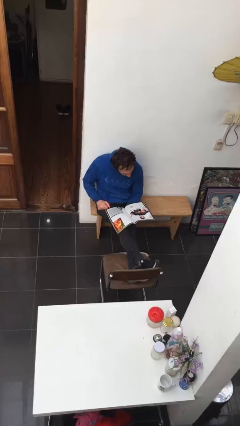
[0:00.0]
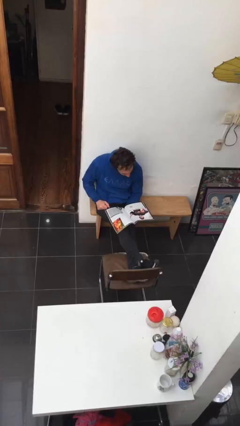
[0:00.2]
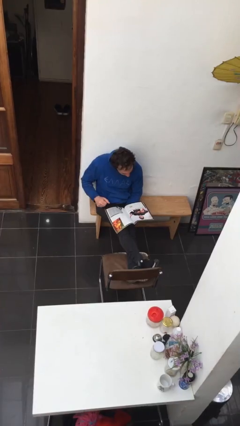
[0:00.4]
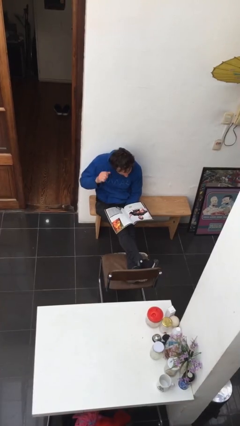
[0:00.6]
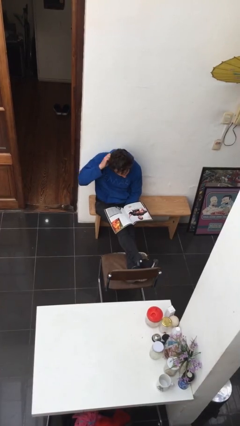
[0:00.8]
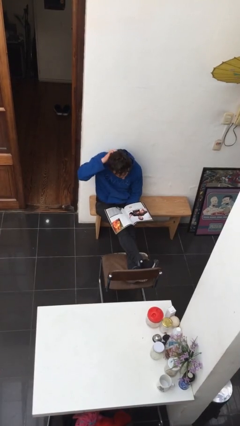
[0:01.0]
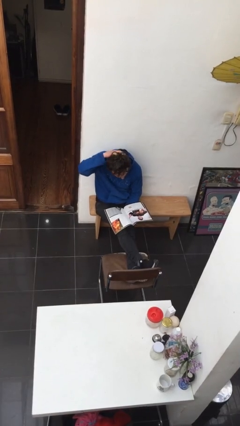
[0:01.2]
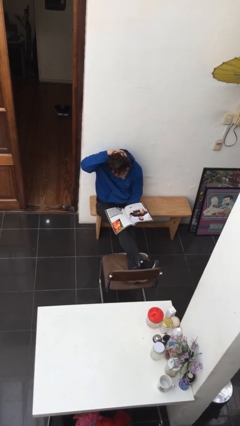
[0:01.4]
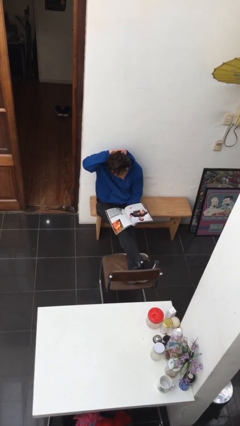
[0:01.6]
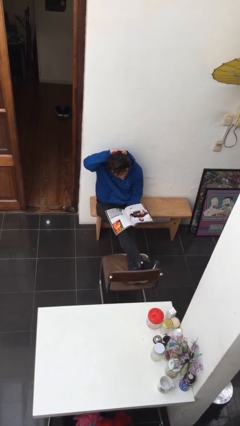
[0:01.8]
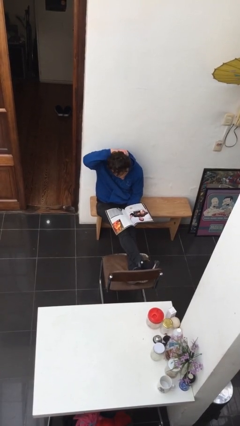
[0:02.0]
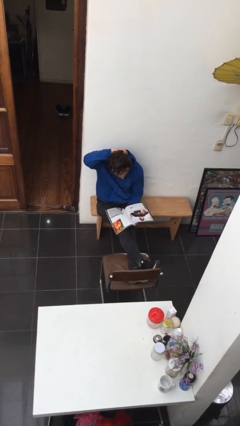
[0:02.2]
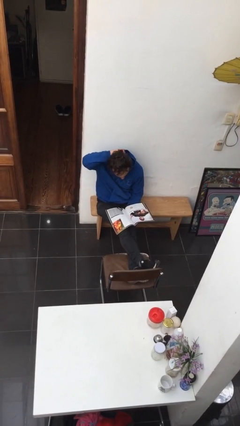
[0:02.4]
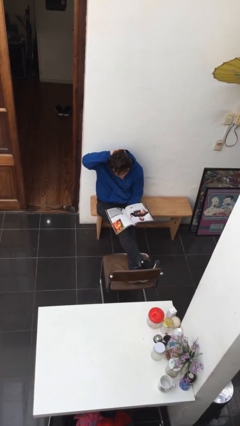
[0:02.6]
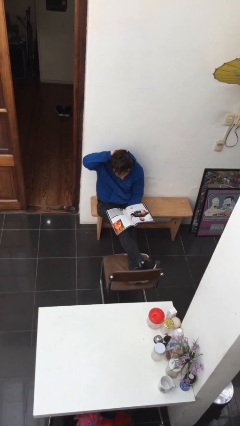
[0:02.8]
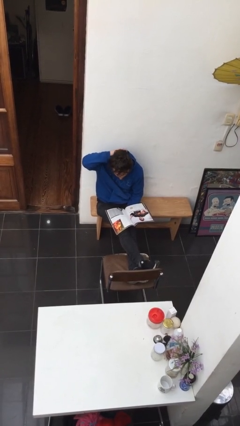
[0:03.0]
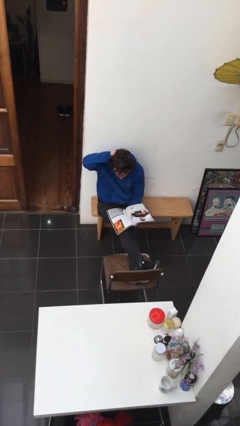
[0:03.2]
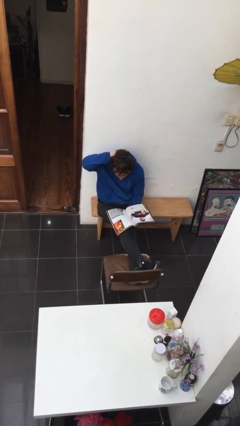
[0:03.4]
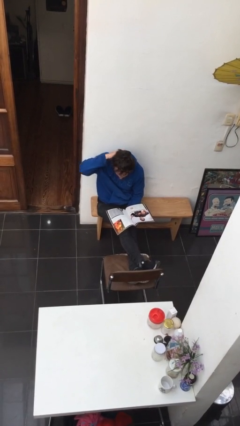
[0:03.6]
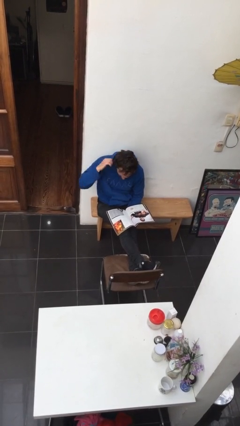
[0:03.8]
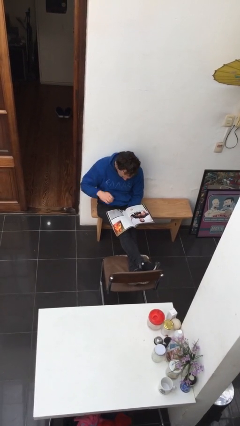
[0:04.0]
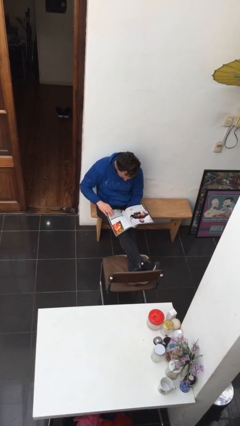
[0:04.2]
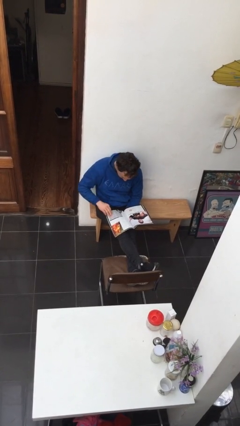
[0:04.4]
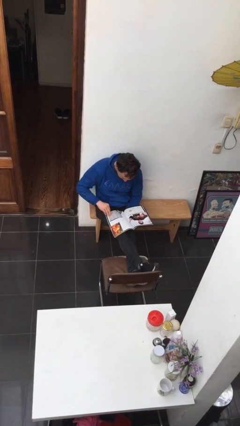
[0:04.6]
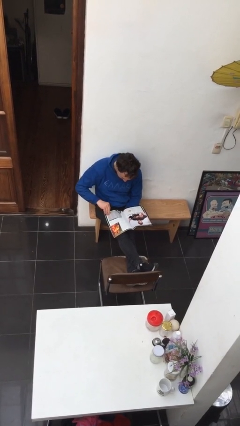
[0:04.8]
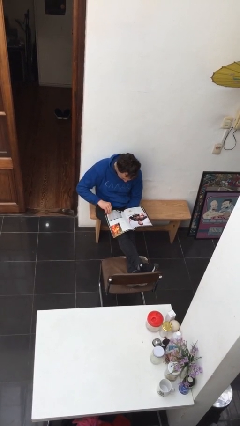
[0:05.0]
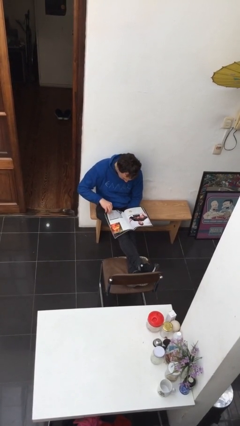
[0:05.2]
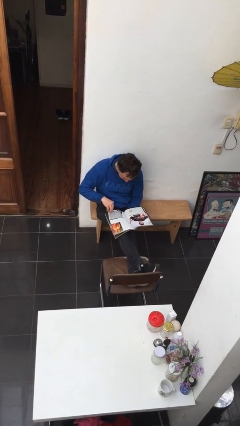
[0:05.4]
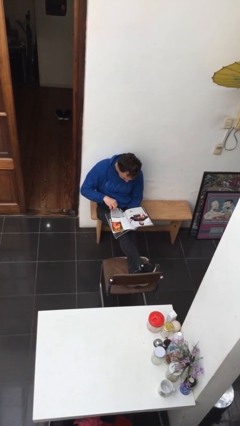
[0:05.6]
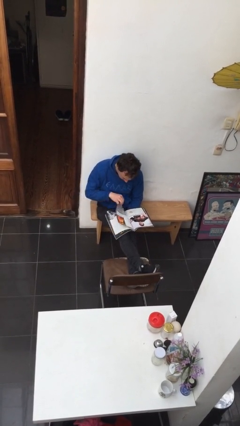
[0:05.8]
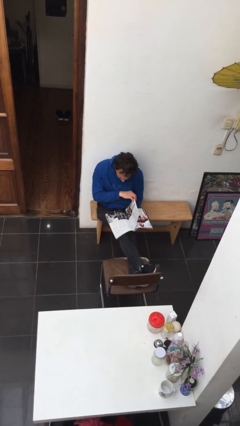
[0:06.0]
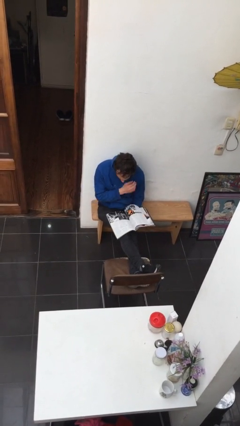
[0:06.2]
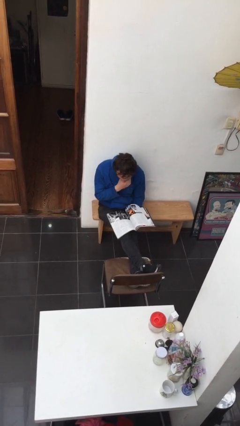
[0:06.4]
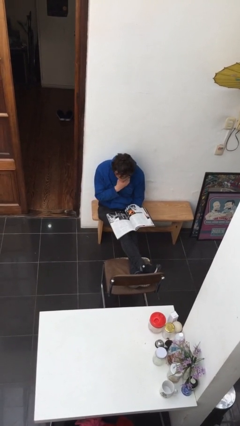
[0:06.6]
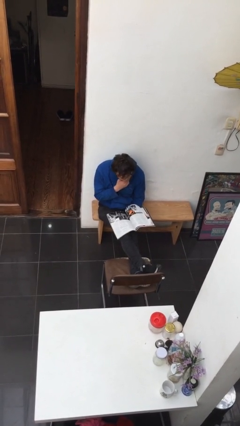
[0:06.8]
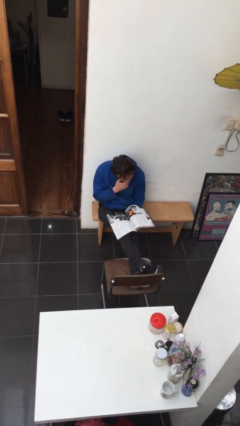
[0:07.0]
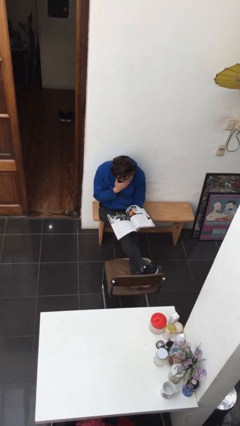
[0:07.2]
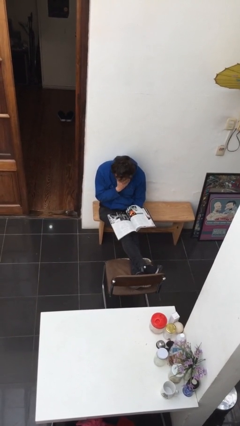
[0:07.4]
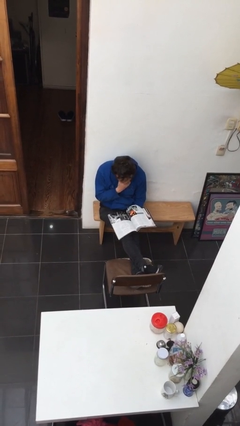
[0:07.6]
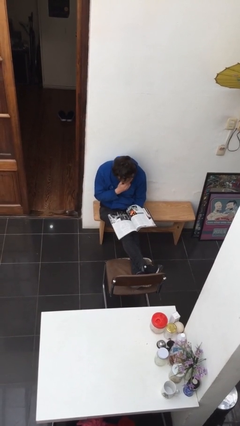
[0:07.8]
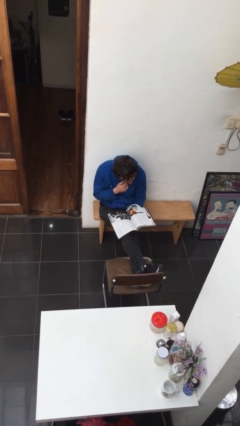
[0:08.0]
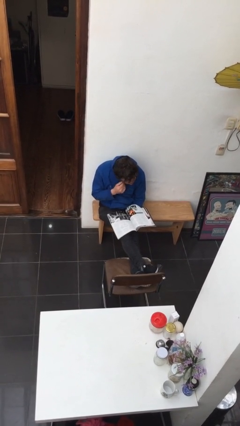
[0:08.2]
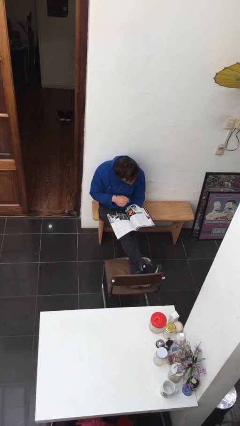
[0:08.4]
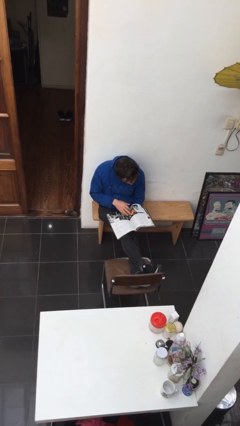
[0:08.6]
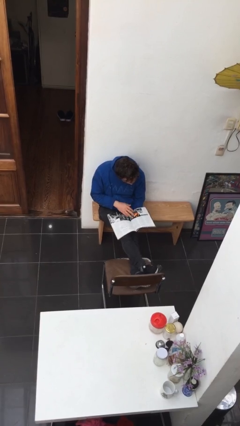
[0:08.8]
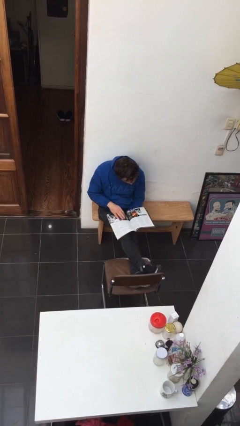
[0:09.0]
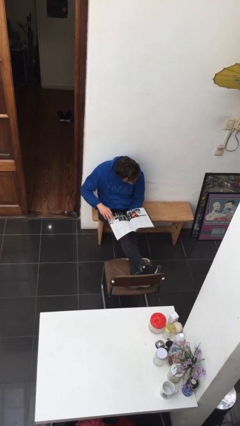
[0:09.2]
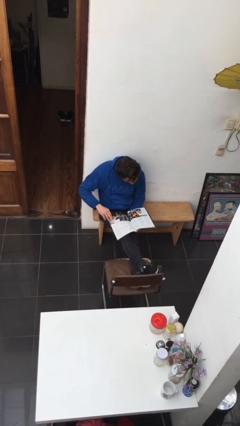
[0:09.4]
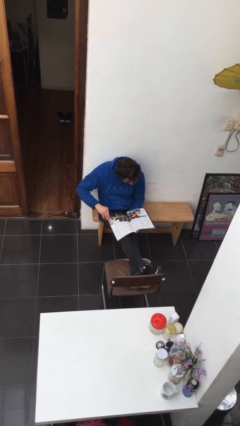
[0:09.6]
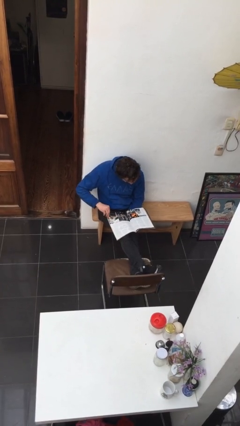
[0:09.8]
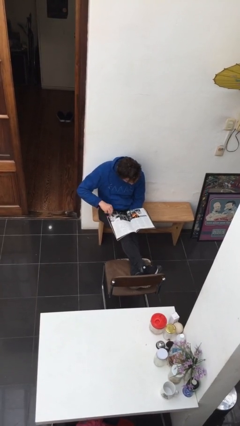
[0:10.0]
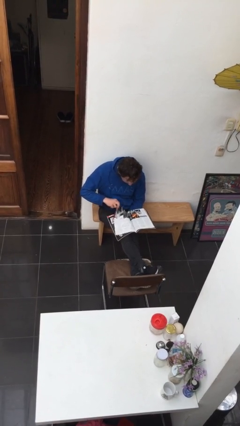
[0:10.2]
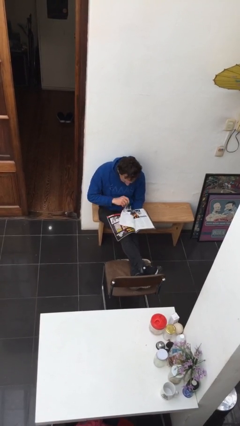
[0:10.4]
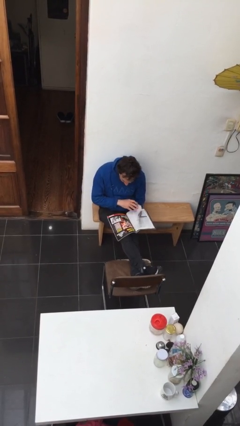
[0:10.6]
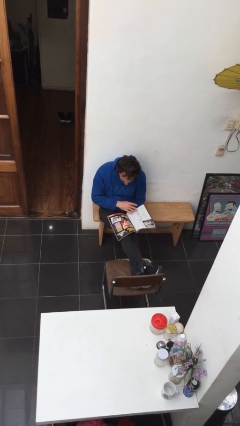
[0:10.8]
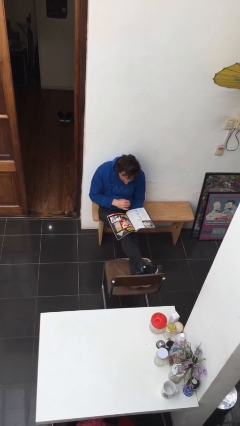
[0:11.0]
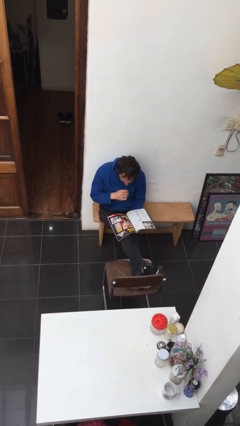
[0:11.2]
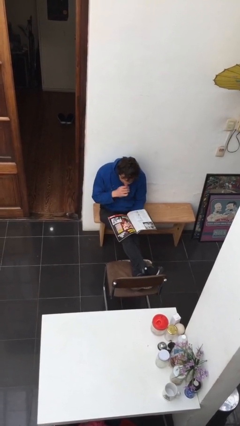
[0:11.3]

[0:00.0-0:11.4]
person reads document

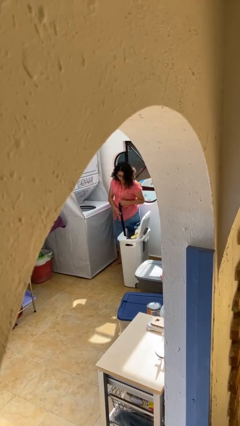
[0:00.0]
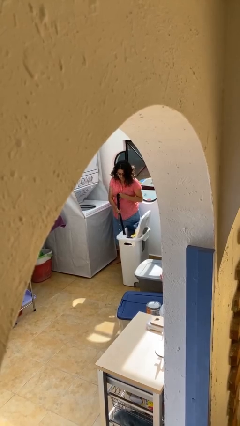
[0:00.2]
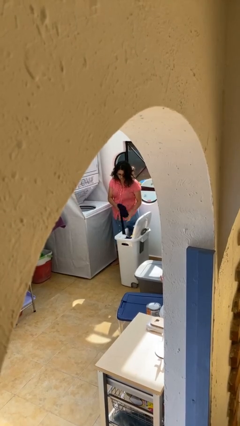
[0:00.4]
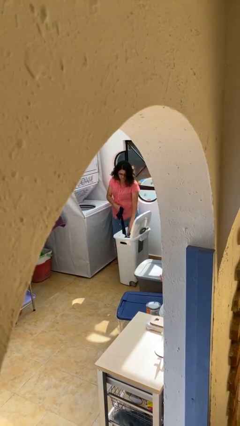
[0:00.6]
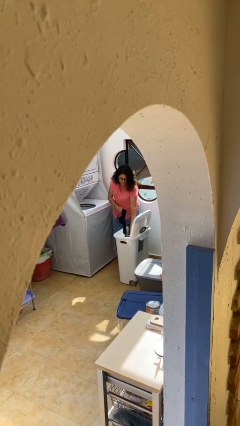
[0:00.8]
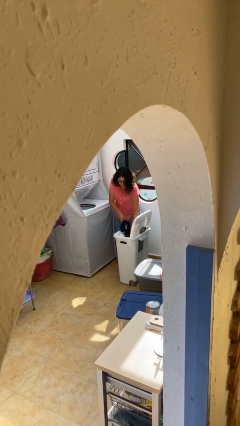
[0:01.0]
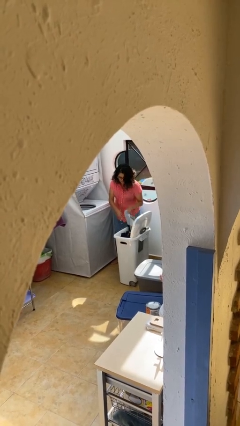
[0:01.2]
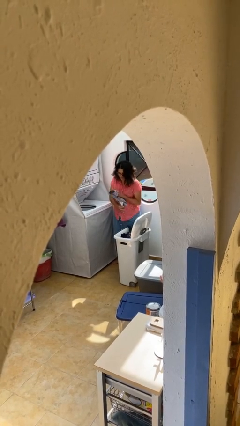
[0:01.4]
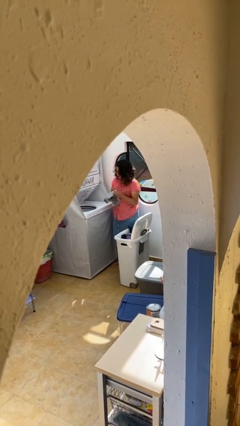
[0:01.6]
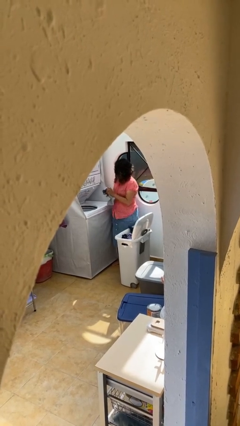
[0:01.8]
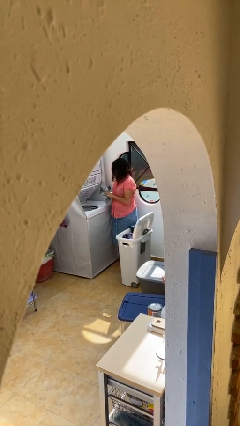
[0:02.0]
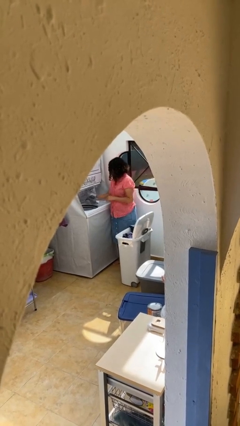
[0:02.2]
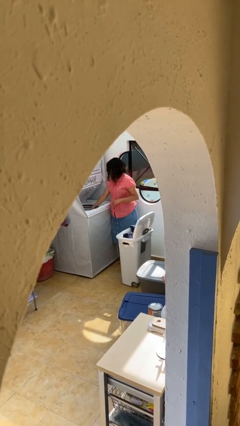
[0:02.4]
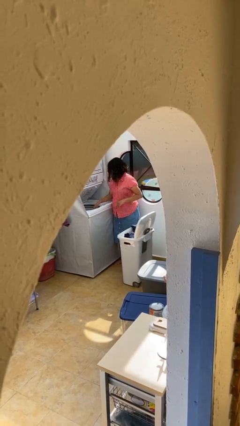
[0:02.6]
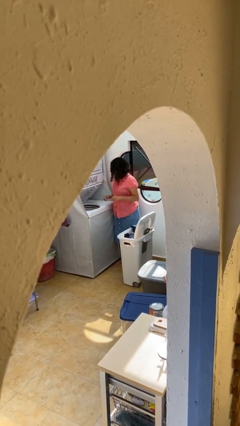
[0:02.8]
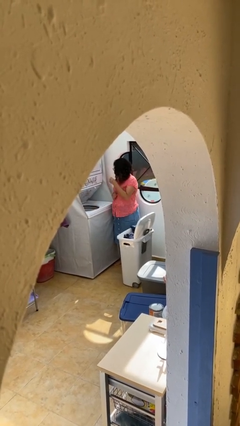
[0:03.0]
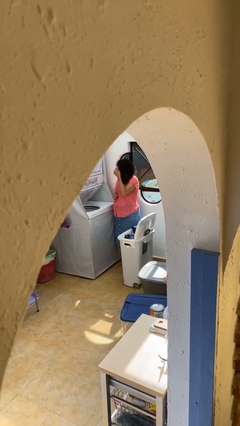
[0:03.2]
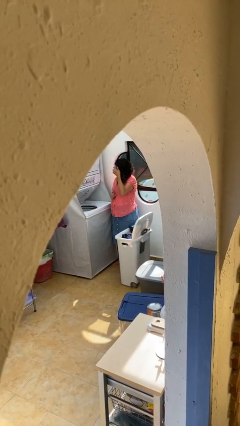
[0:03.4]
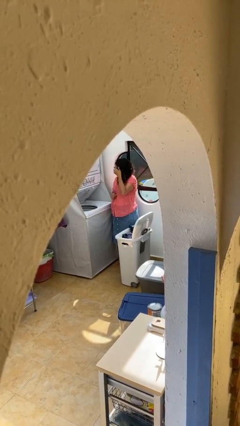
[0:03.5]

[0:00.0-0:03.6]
person loads clotheswasher

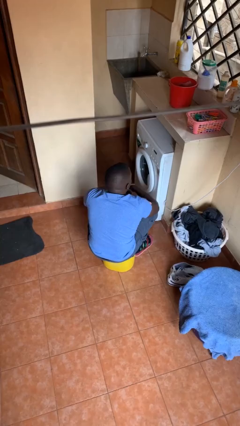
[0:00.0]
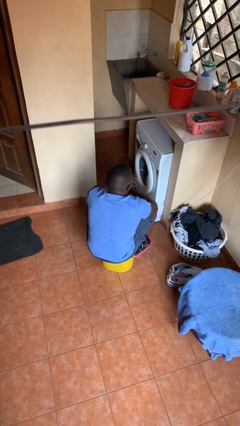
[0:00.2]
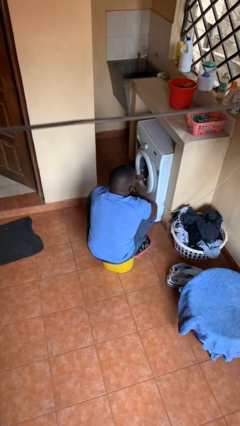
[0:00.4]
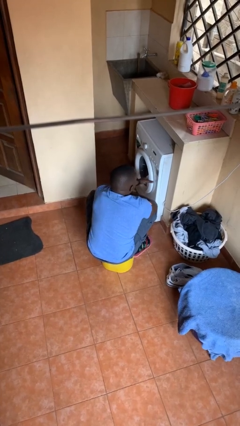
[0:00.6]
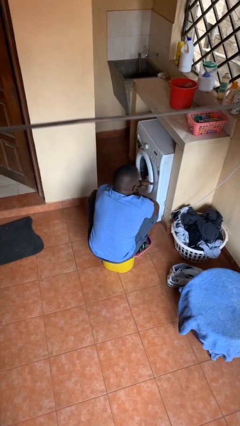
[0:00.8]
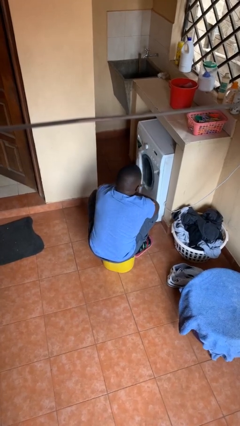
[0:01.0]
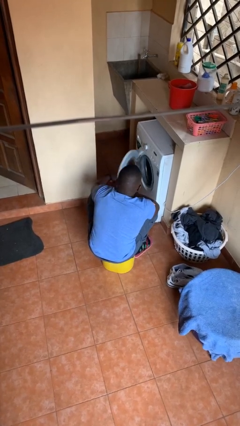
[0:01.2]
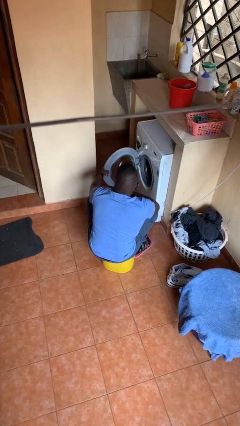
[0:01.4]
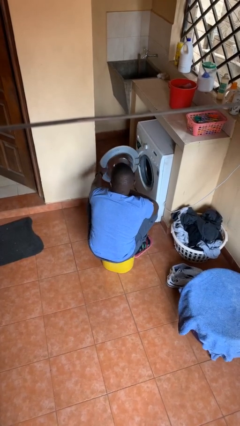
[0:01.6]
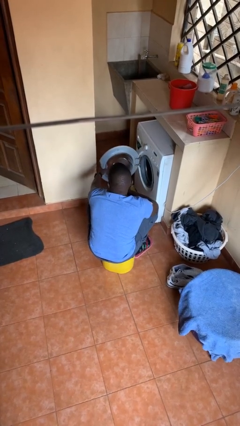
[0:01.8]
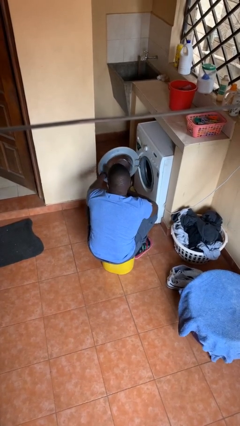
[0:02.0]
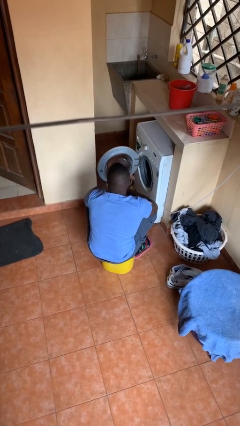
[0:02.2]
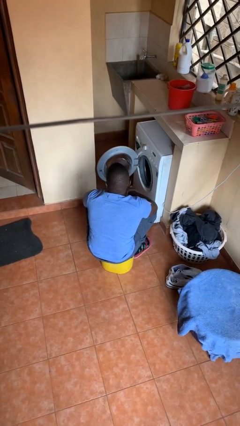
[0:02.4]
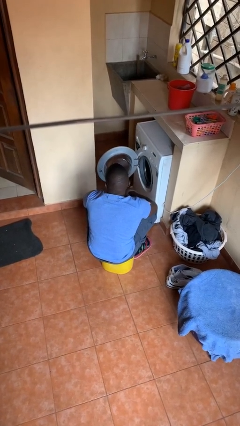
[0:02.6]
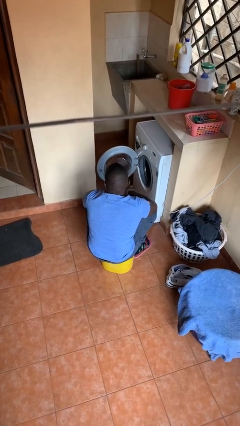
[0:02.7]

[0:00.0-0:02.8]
person opens clothes washer

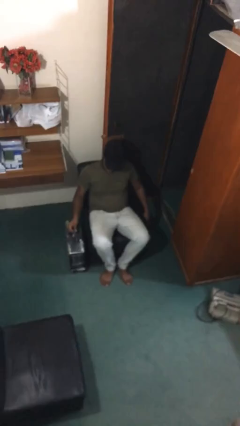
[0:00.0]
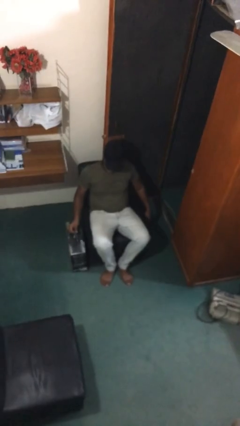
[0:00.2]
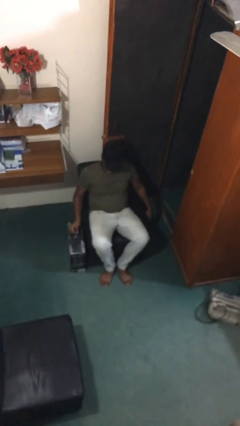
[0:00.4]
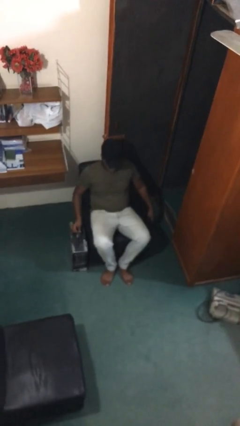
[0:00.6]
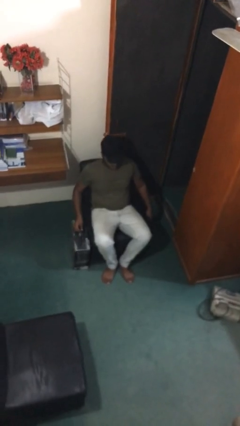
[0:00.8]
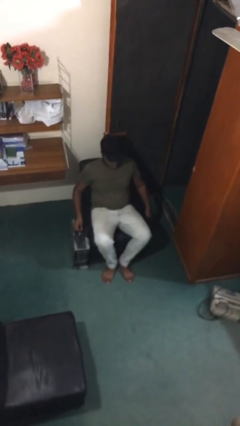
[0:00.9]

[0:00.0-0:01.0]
person puts down object on floor
